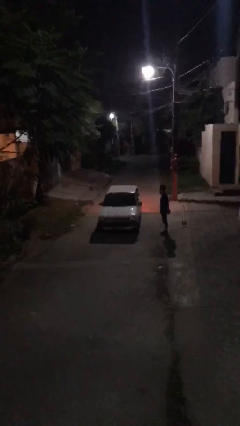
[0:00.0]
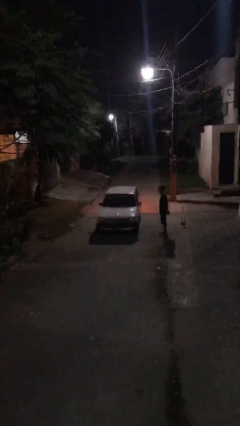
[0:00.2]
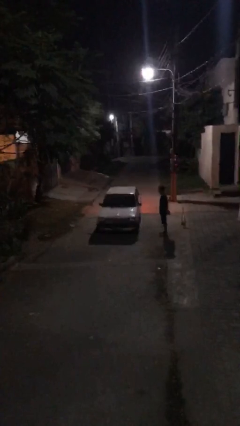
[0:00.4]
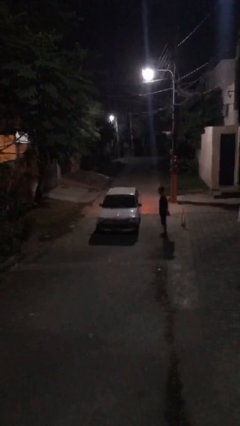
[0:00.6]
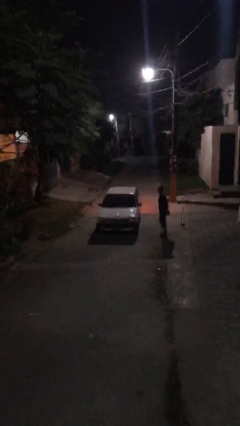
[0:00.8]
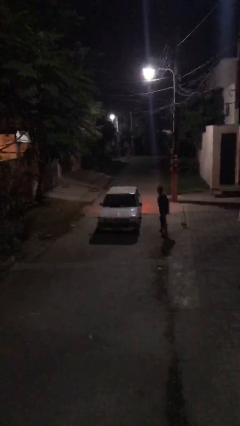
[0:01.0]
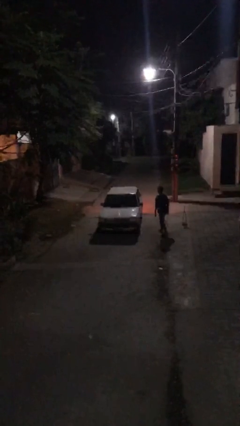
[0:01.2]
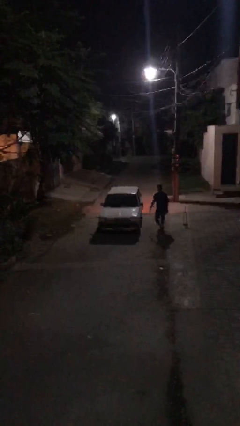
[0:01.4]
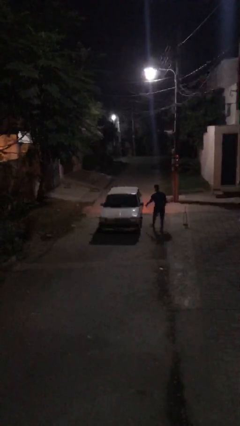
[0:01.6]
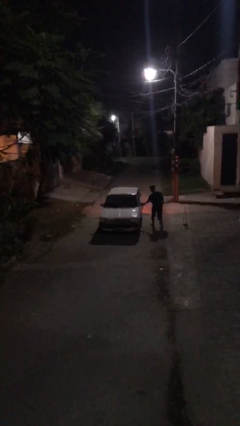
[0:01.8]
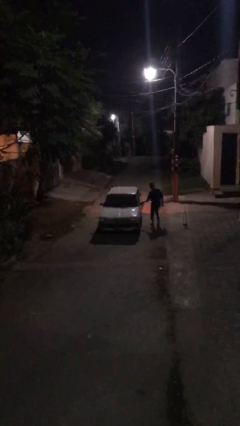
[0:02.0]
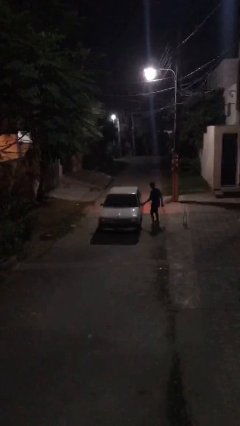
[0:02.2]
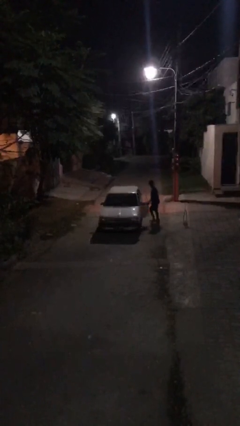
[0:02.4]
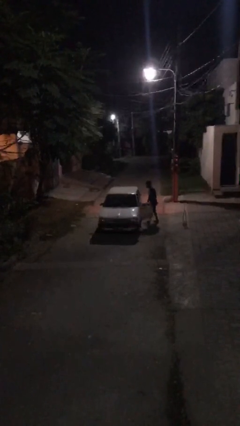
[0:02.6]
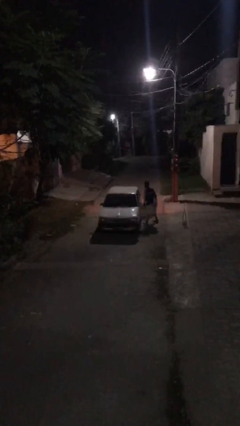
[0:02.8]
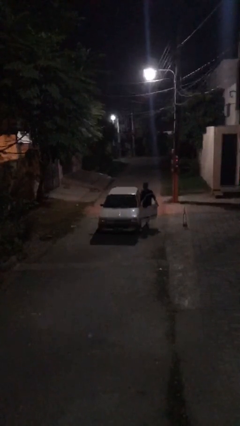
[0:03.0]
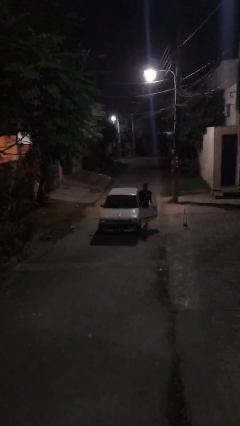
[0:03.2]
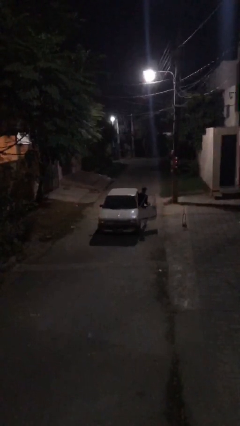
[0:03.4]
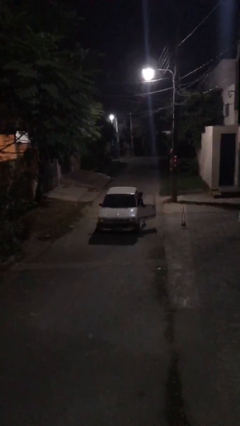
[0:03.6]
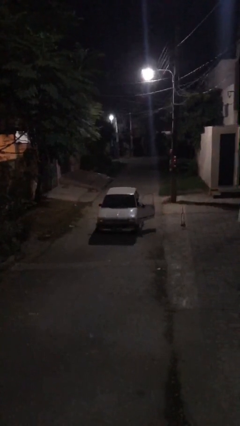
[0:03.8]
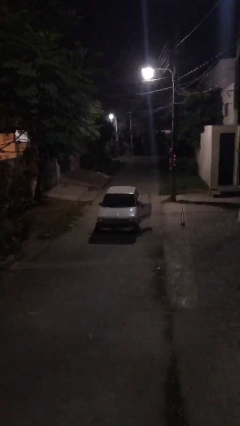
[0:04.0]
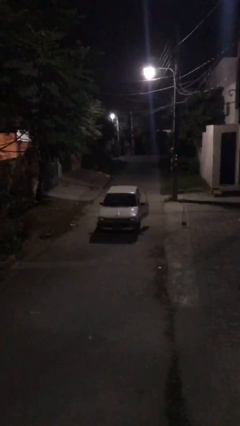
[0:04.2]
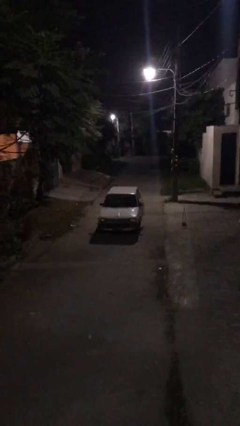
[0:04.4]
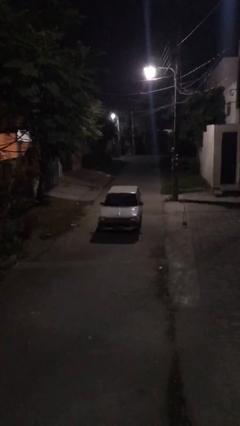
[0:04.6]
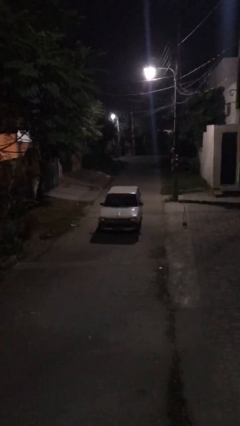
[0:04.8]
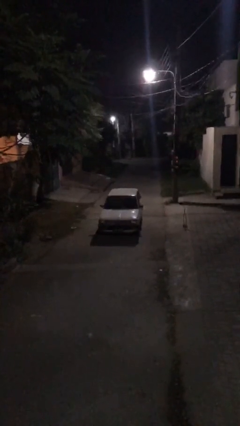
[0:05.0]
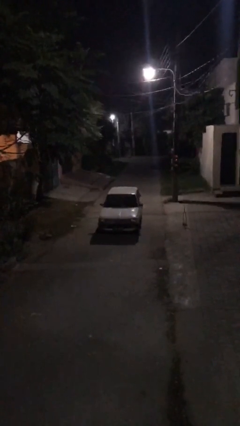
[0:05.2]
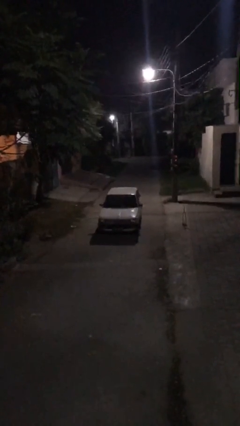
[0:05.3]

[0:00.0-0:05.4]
car picks up person

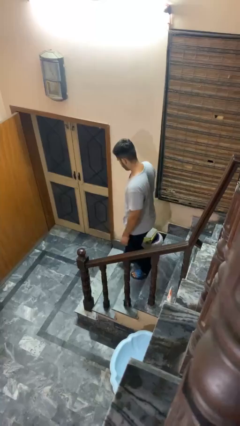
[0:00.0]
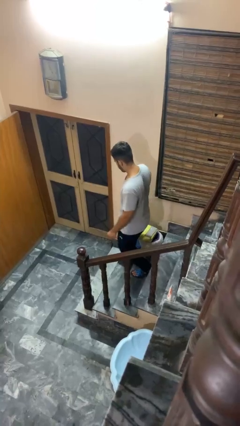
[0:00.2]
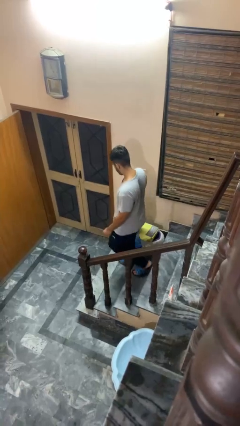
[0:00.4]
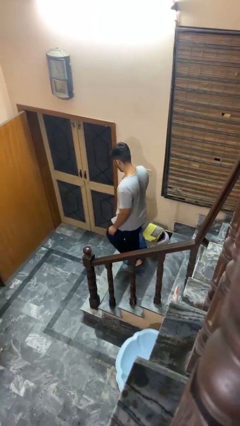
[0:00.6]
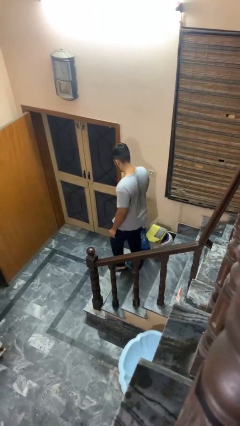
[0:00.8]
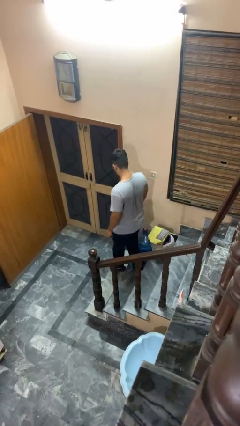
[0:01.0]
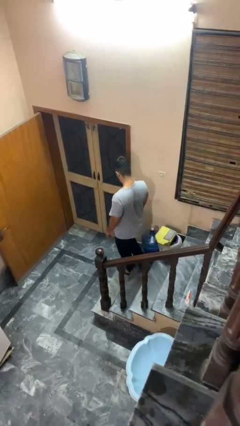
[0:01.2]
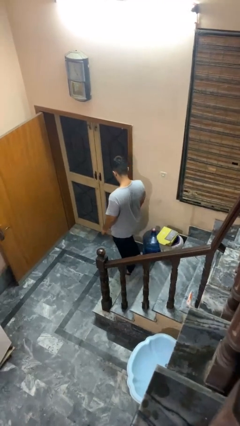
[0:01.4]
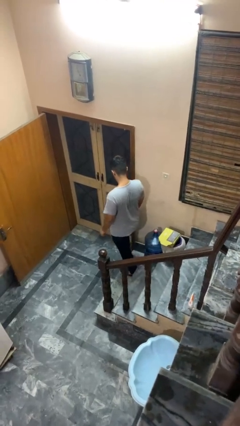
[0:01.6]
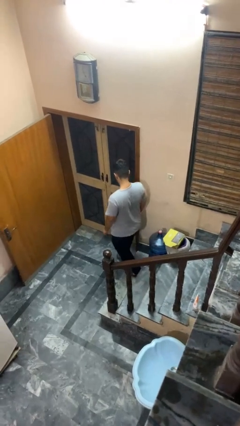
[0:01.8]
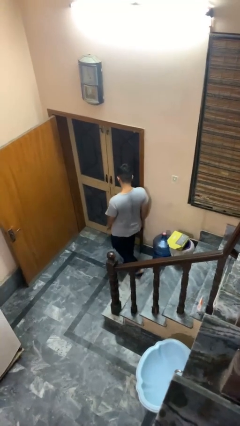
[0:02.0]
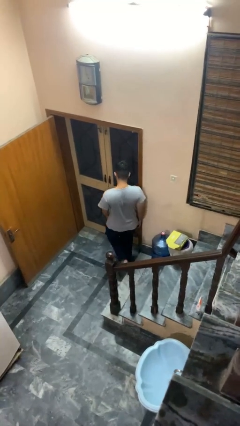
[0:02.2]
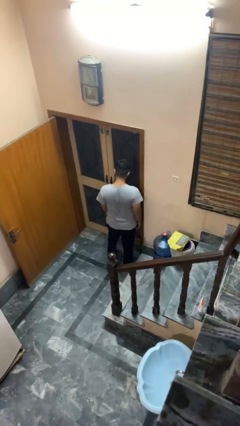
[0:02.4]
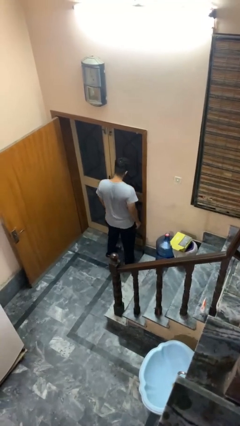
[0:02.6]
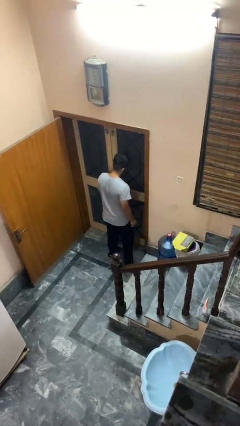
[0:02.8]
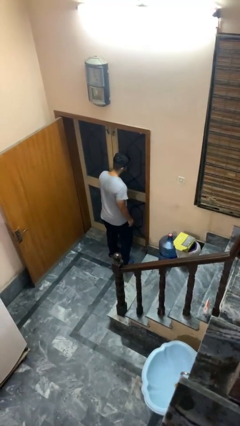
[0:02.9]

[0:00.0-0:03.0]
person climbs down stairs

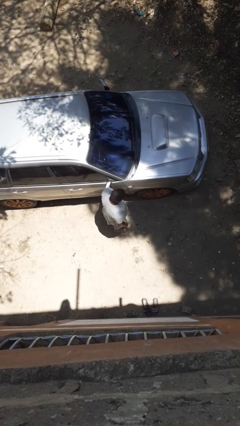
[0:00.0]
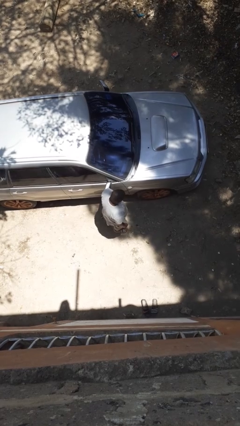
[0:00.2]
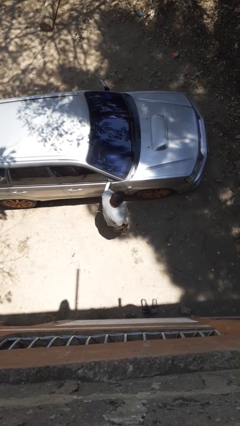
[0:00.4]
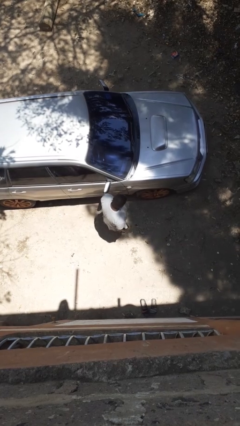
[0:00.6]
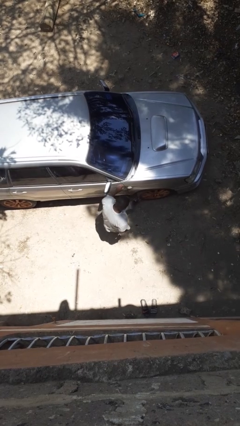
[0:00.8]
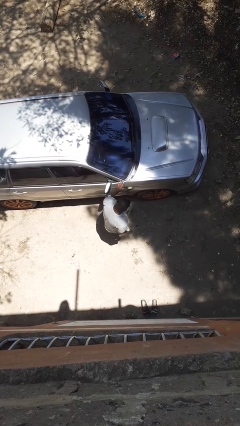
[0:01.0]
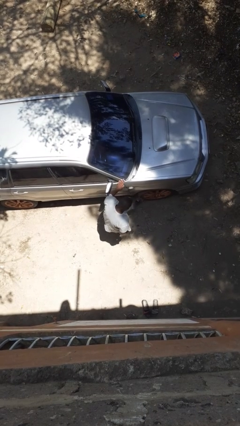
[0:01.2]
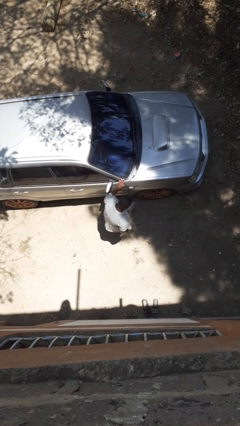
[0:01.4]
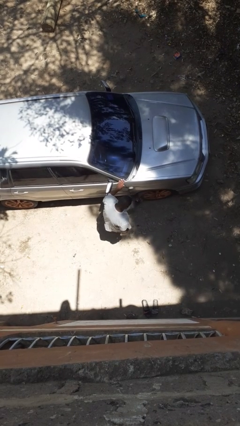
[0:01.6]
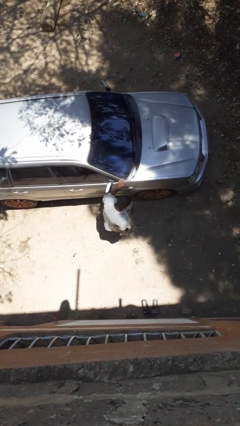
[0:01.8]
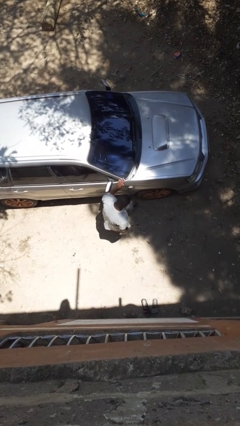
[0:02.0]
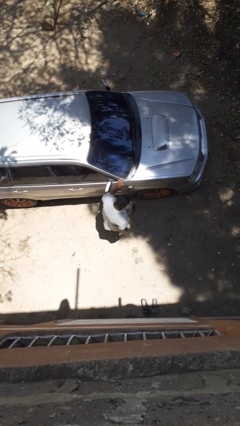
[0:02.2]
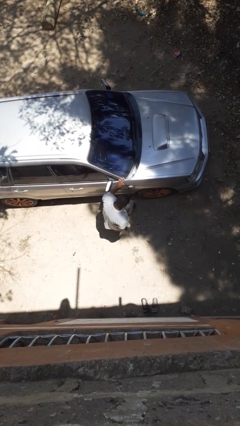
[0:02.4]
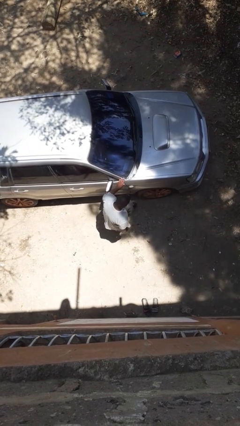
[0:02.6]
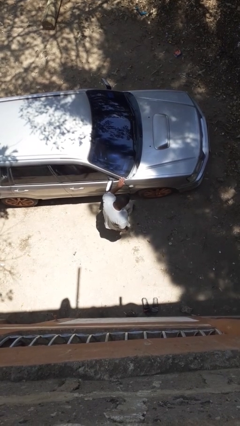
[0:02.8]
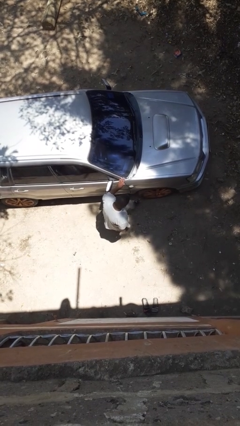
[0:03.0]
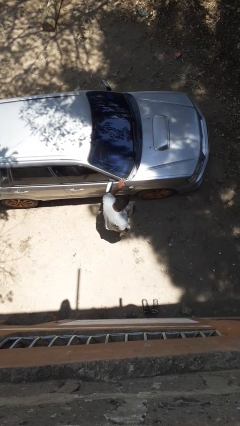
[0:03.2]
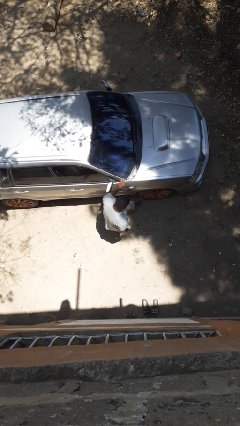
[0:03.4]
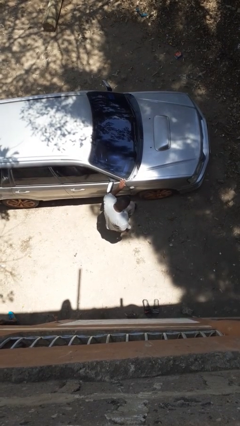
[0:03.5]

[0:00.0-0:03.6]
person kicks car tires

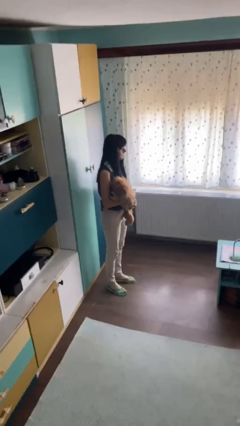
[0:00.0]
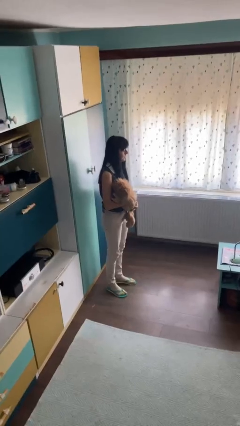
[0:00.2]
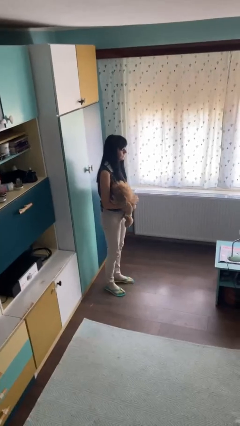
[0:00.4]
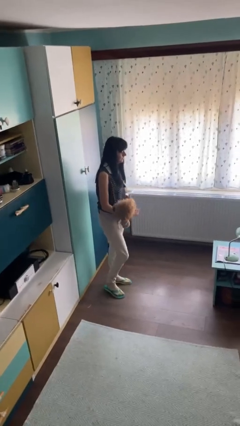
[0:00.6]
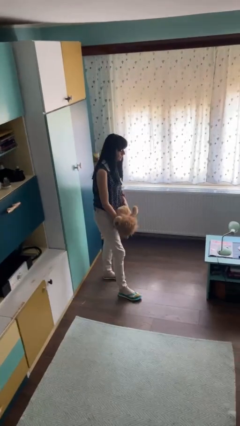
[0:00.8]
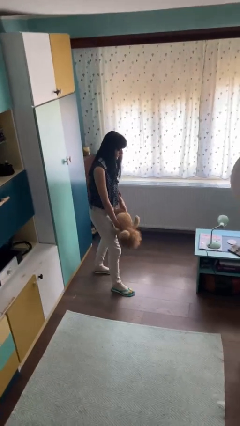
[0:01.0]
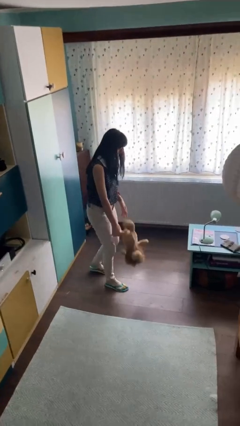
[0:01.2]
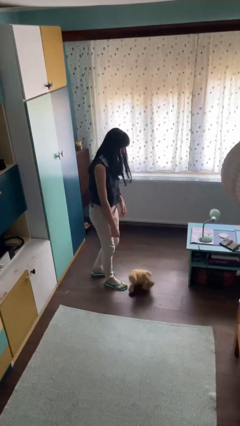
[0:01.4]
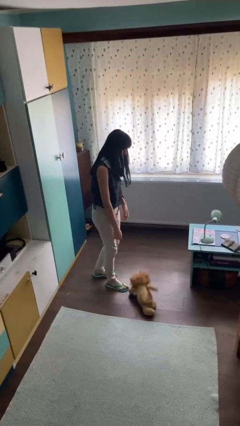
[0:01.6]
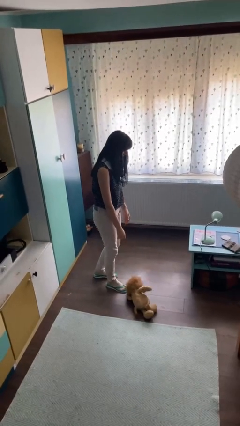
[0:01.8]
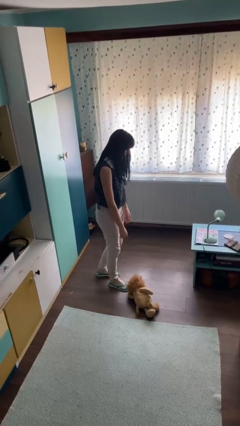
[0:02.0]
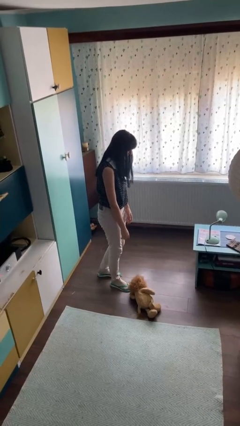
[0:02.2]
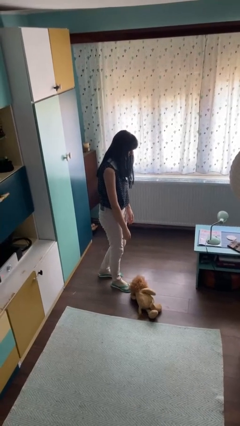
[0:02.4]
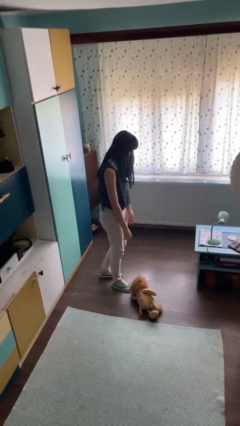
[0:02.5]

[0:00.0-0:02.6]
person drops object

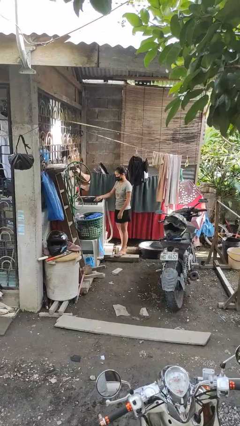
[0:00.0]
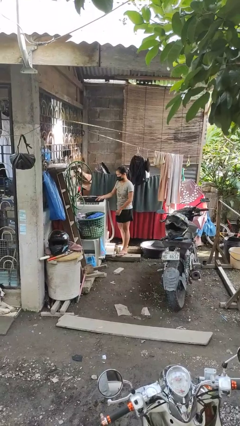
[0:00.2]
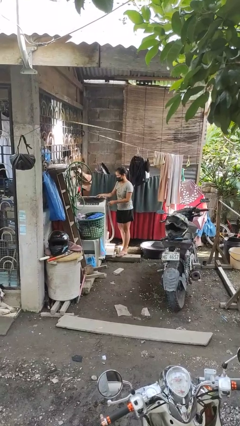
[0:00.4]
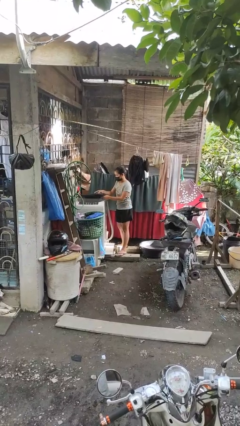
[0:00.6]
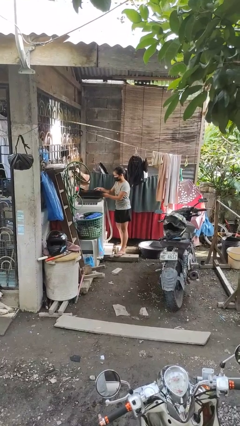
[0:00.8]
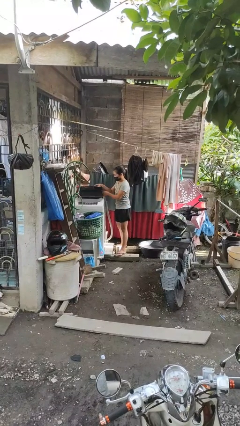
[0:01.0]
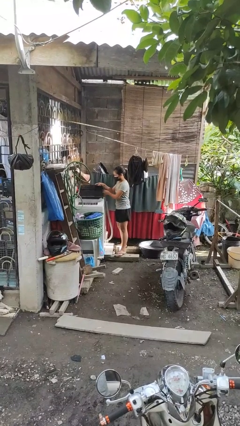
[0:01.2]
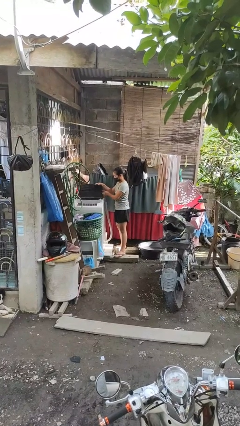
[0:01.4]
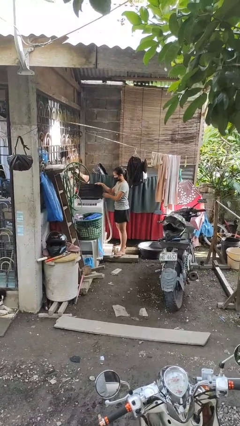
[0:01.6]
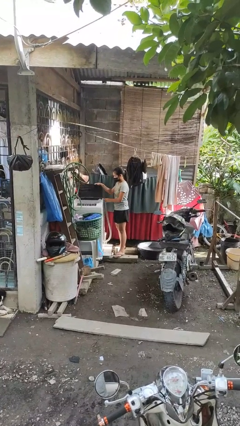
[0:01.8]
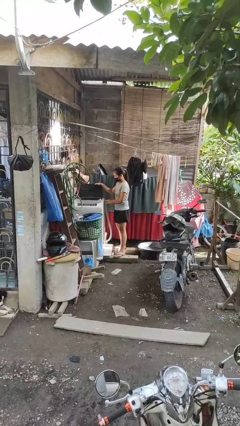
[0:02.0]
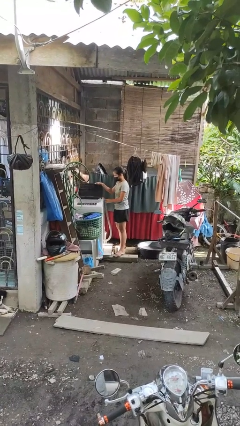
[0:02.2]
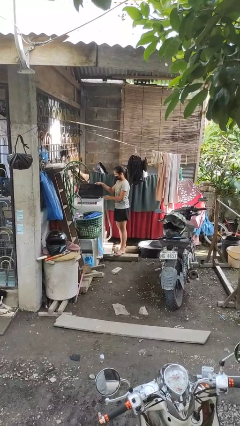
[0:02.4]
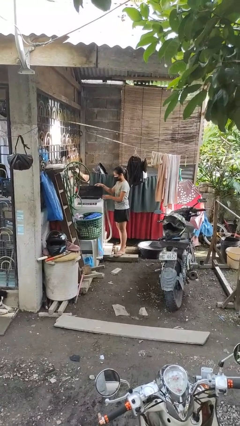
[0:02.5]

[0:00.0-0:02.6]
person opens clothes washer

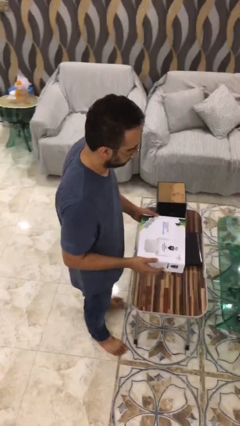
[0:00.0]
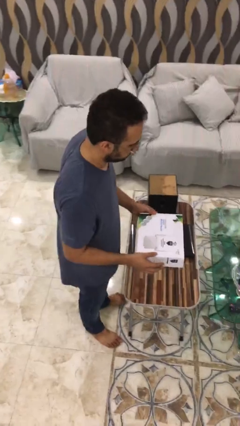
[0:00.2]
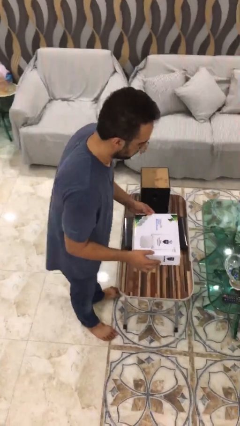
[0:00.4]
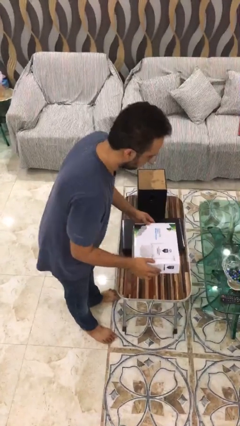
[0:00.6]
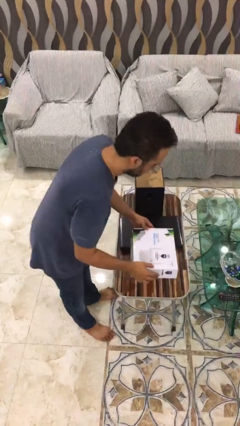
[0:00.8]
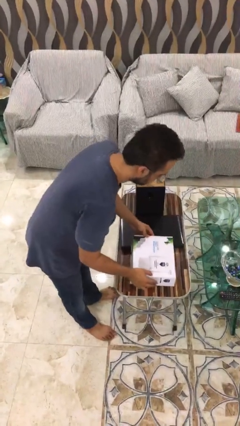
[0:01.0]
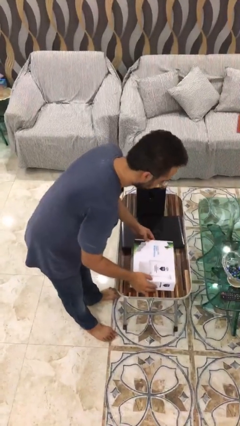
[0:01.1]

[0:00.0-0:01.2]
person puts down object on table
